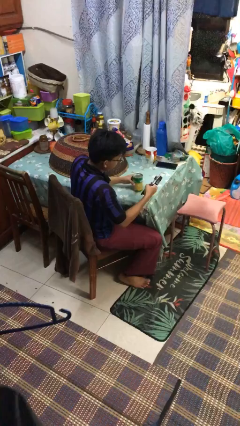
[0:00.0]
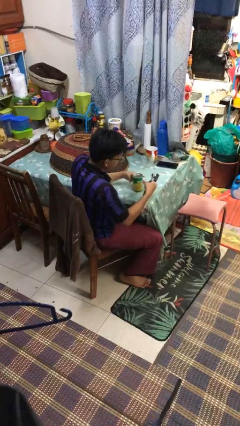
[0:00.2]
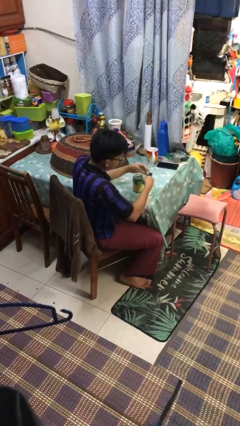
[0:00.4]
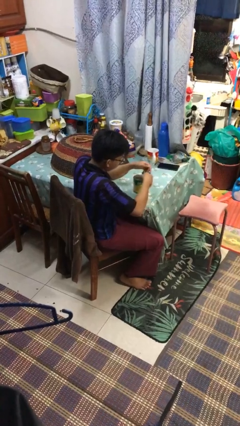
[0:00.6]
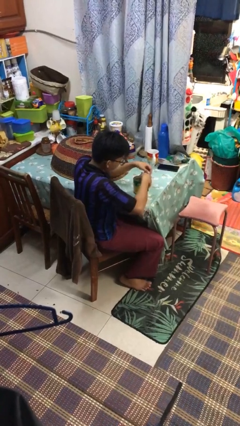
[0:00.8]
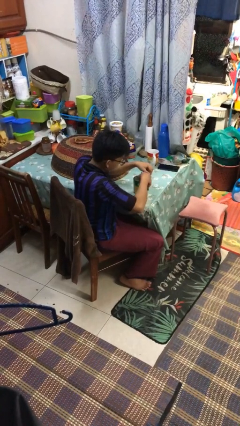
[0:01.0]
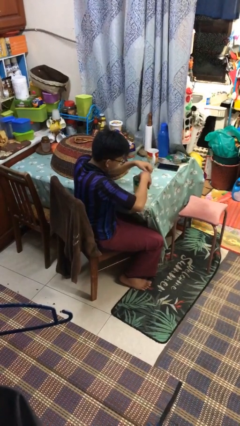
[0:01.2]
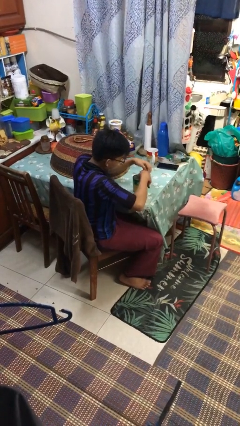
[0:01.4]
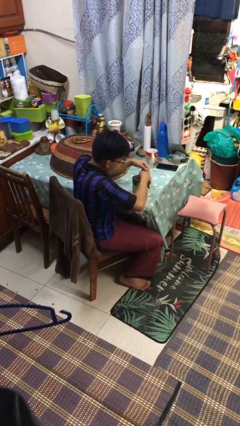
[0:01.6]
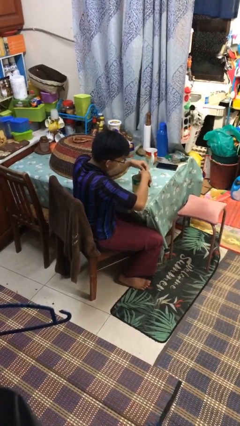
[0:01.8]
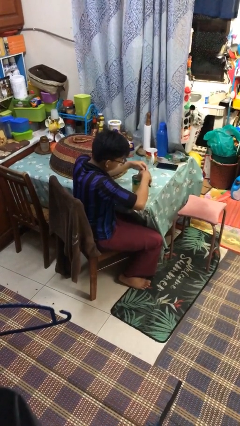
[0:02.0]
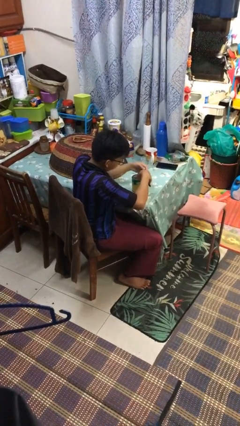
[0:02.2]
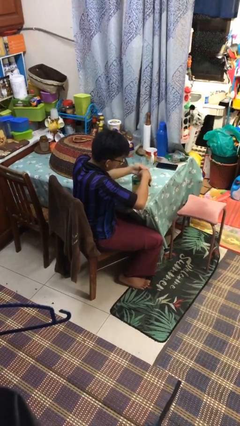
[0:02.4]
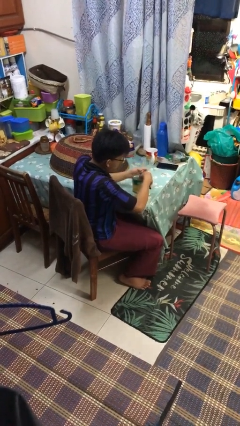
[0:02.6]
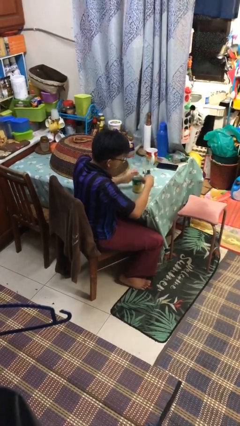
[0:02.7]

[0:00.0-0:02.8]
person opens can with can opener

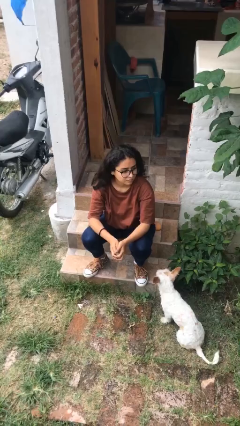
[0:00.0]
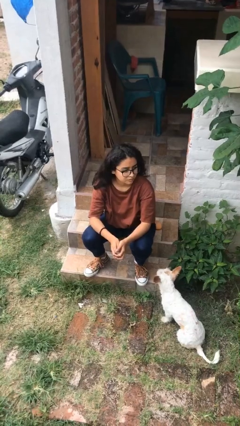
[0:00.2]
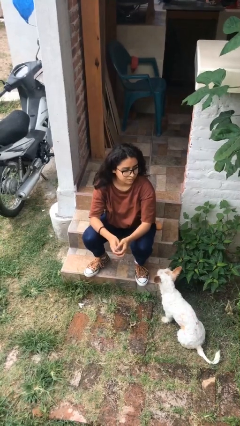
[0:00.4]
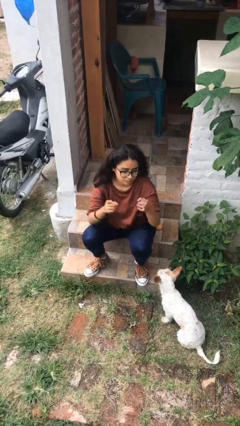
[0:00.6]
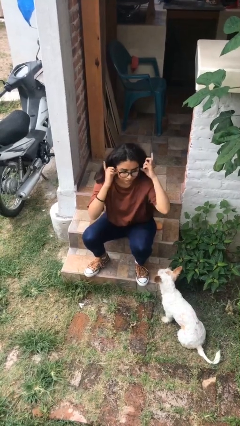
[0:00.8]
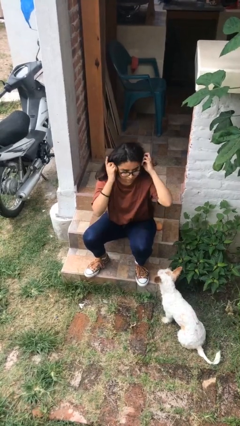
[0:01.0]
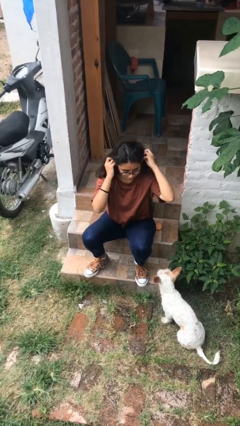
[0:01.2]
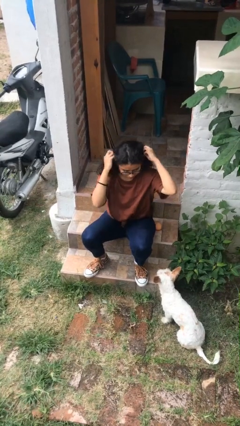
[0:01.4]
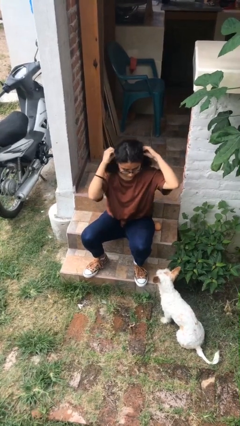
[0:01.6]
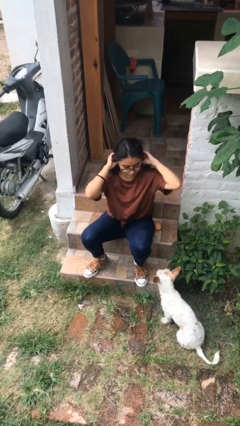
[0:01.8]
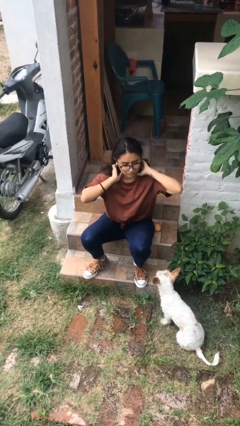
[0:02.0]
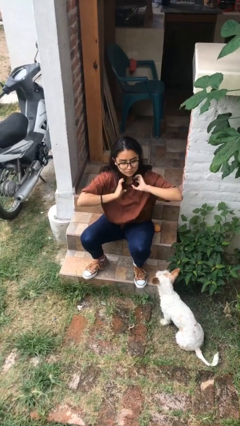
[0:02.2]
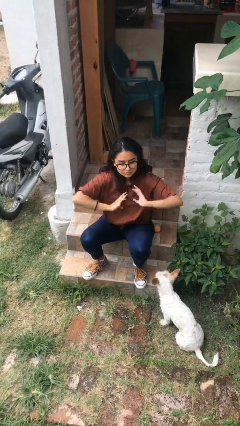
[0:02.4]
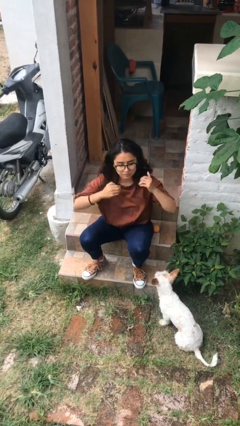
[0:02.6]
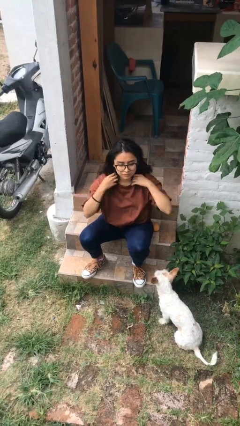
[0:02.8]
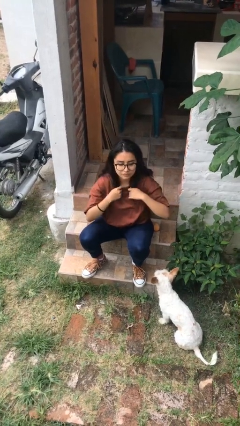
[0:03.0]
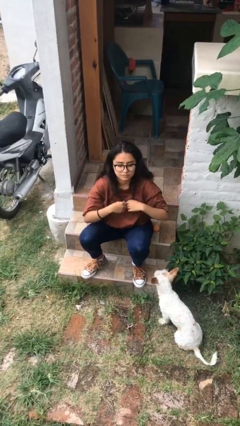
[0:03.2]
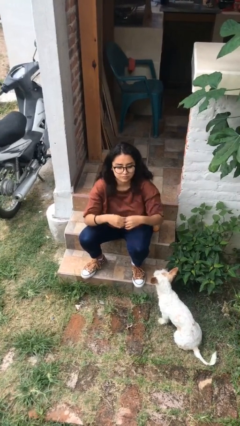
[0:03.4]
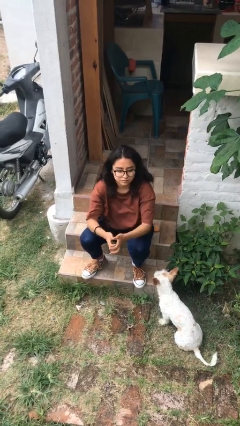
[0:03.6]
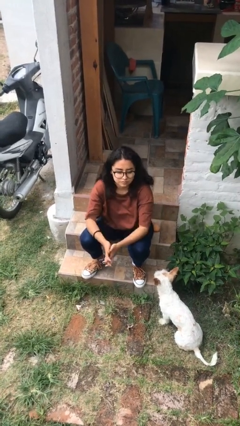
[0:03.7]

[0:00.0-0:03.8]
person strokes hair

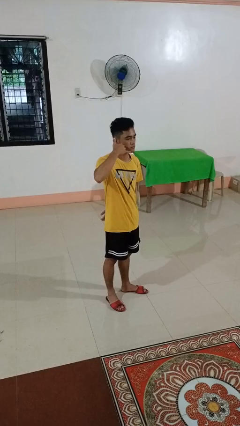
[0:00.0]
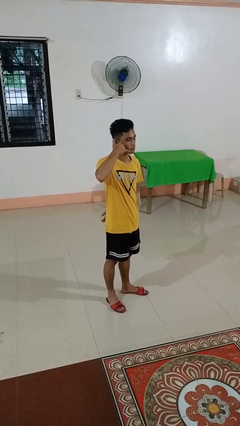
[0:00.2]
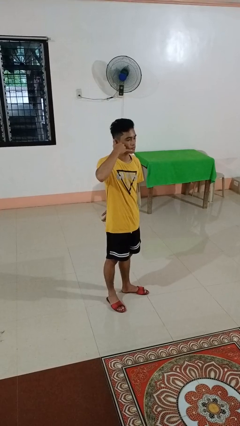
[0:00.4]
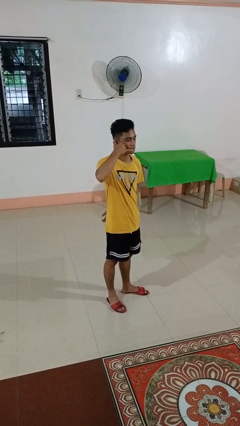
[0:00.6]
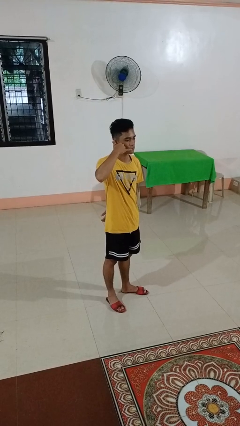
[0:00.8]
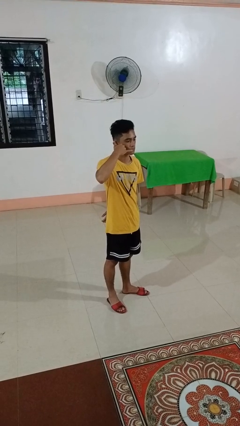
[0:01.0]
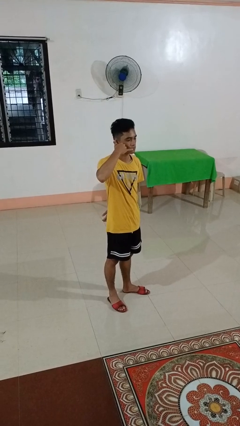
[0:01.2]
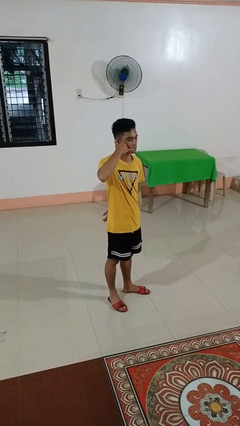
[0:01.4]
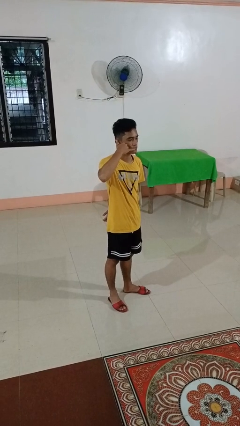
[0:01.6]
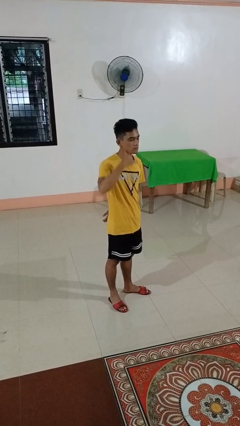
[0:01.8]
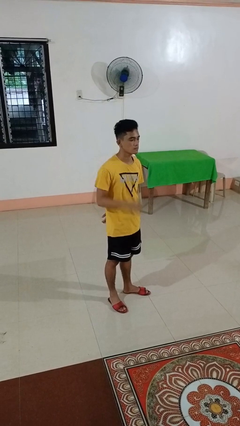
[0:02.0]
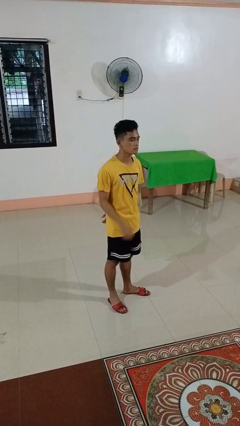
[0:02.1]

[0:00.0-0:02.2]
person gestures call me

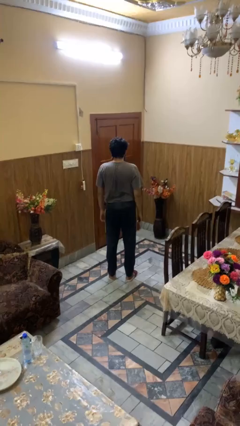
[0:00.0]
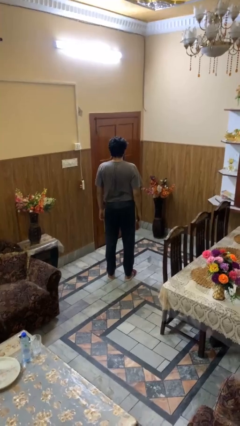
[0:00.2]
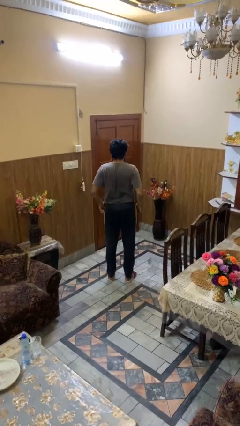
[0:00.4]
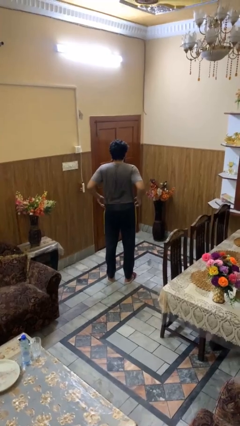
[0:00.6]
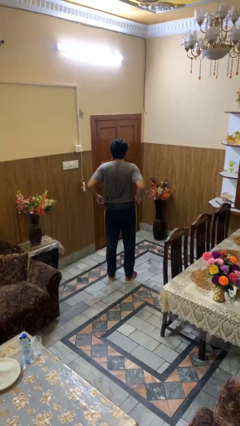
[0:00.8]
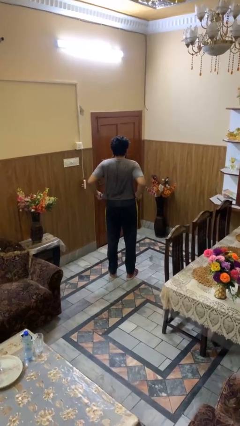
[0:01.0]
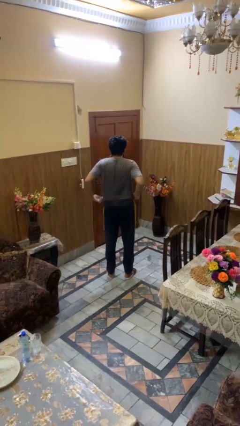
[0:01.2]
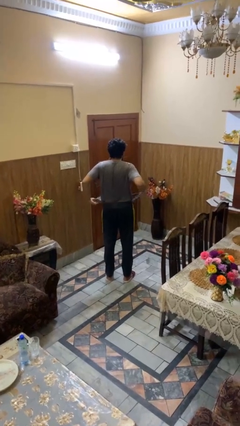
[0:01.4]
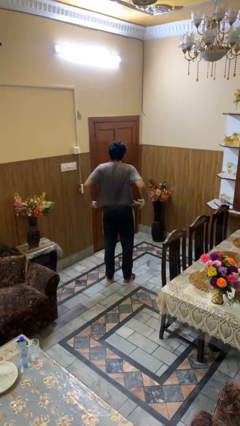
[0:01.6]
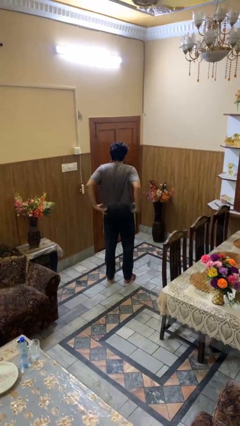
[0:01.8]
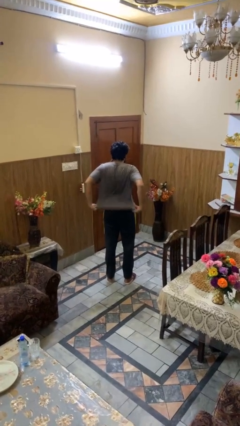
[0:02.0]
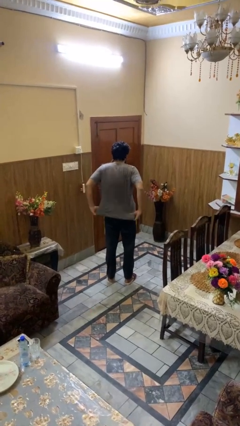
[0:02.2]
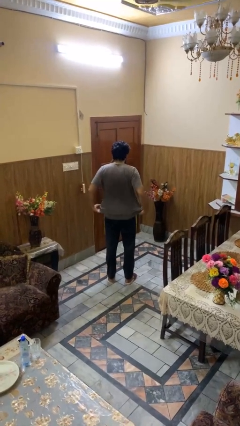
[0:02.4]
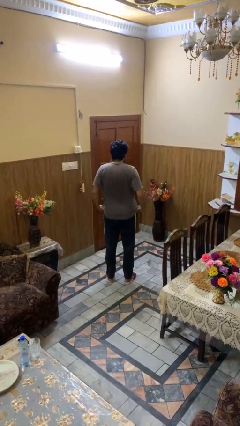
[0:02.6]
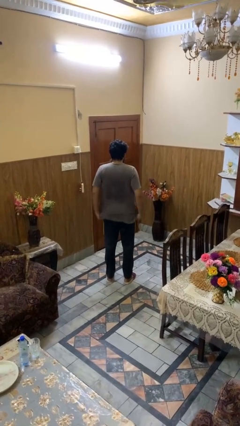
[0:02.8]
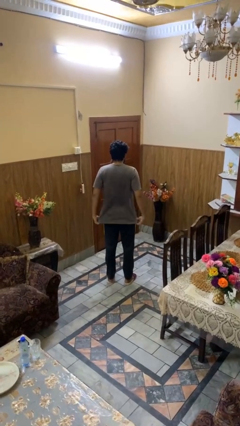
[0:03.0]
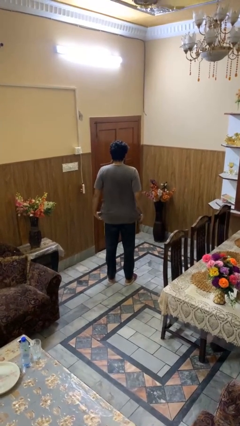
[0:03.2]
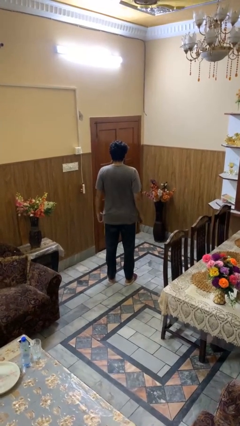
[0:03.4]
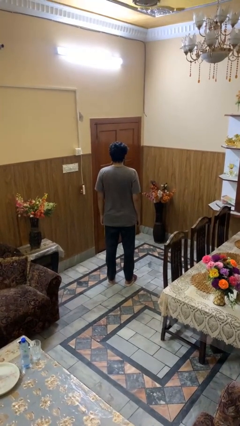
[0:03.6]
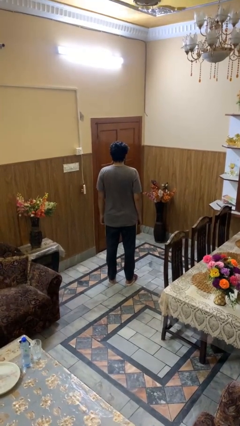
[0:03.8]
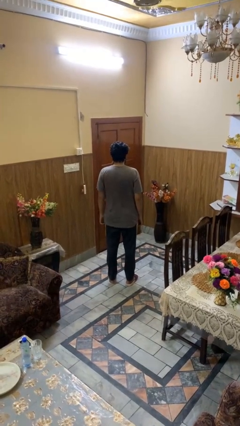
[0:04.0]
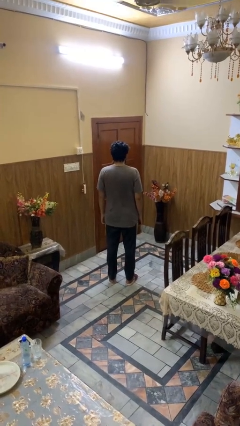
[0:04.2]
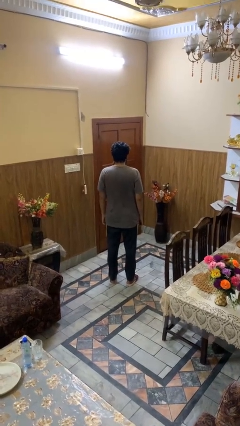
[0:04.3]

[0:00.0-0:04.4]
person untucks shirt

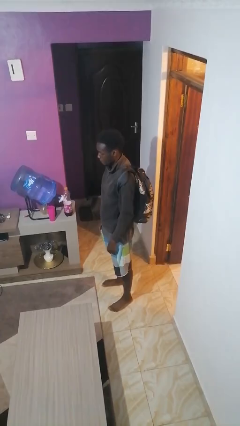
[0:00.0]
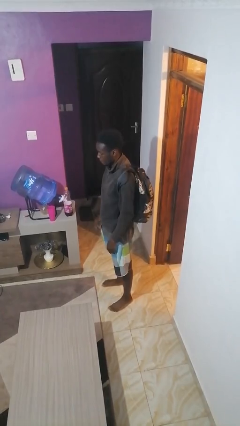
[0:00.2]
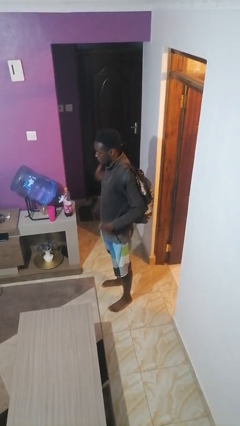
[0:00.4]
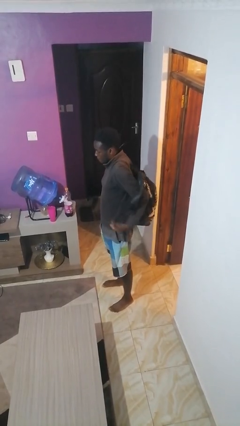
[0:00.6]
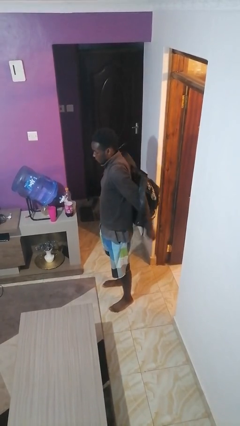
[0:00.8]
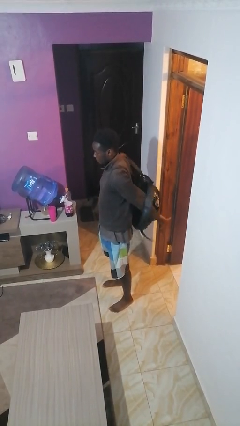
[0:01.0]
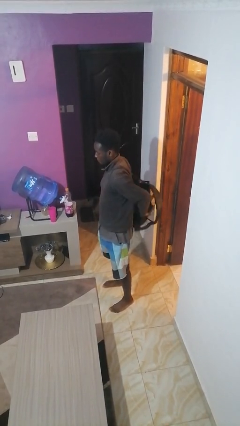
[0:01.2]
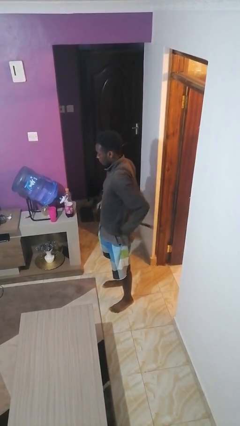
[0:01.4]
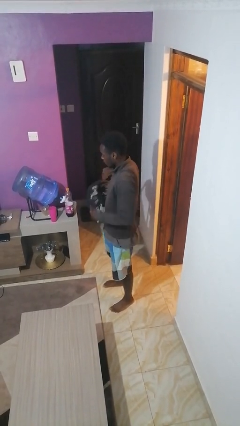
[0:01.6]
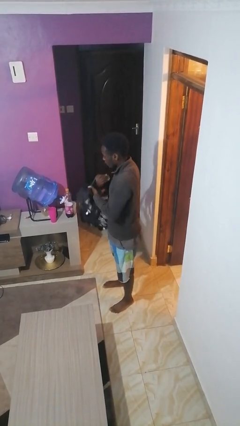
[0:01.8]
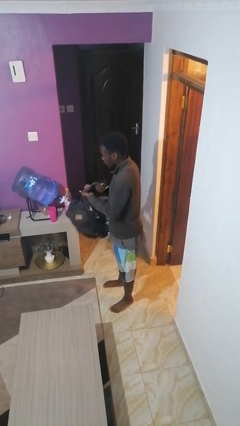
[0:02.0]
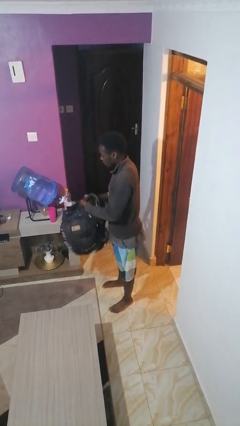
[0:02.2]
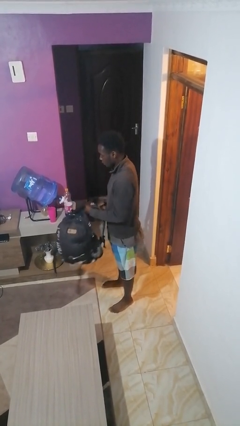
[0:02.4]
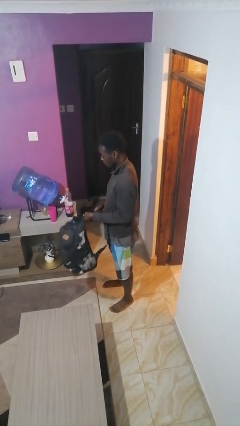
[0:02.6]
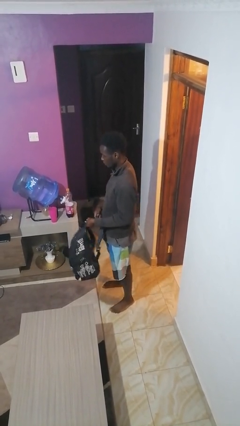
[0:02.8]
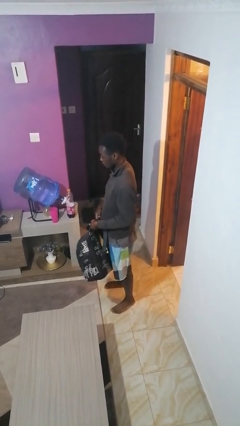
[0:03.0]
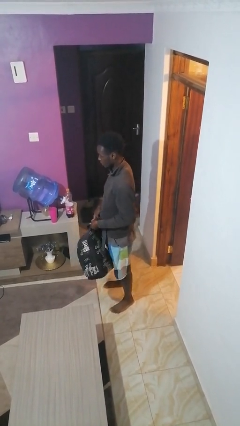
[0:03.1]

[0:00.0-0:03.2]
person takes off backpack

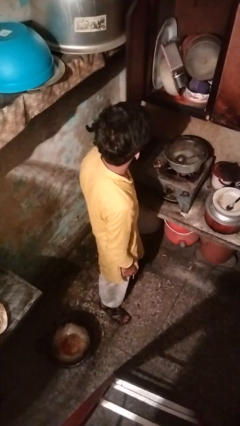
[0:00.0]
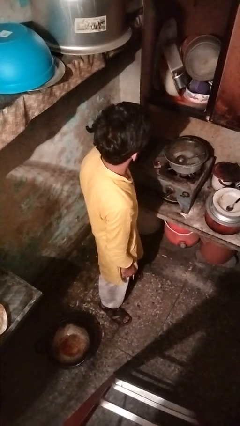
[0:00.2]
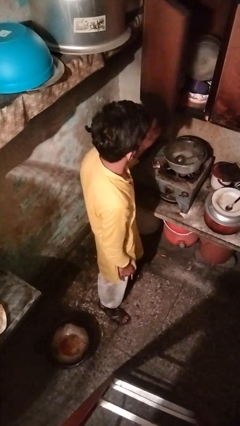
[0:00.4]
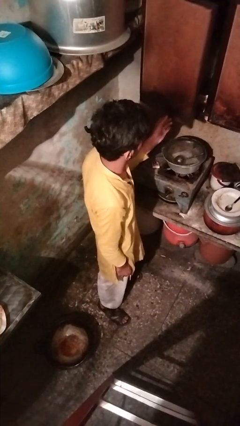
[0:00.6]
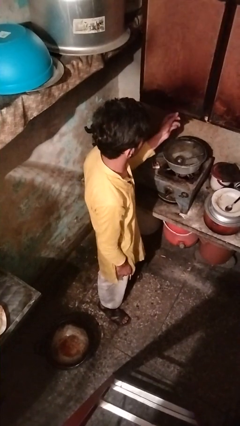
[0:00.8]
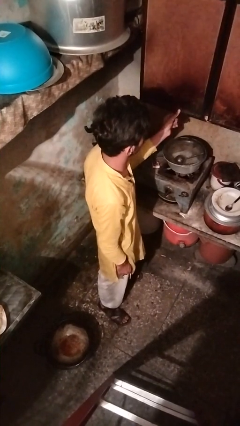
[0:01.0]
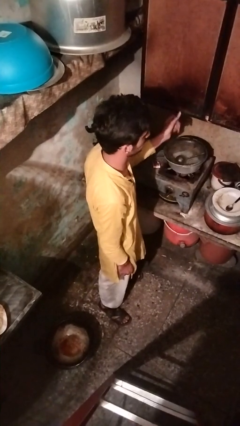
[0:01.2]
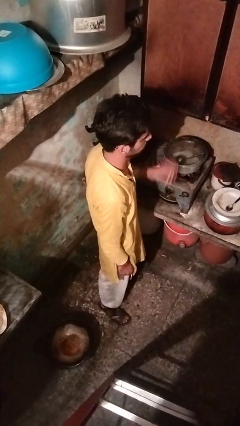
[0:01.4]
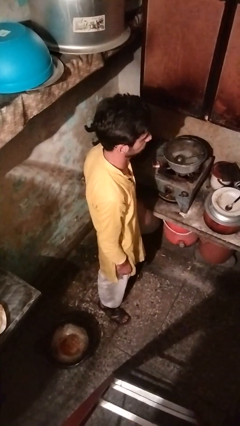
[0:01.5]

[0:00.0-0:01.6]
person closes cabinet
